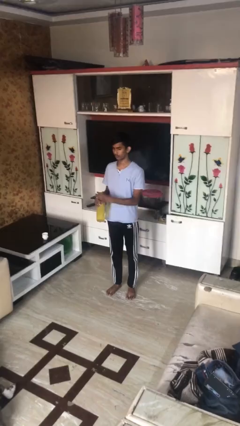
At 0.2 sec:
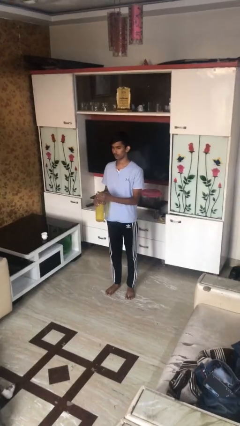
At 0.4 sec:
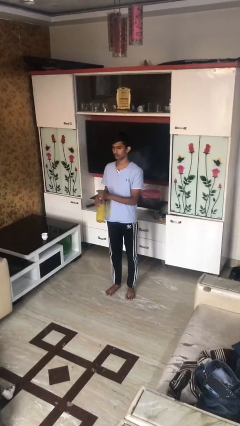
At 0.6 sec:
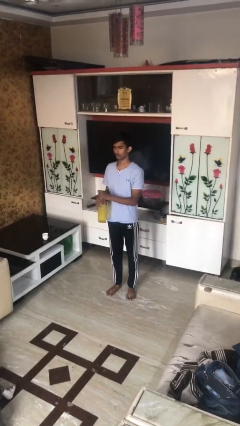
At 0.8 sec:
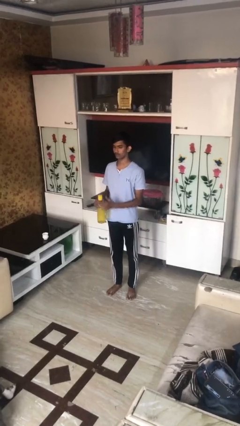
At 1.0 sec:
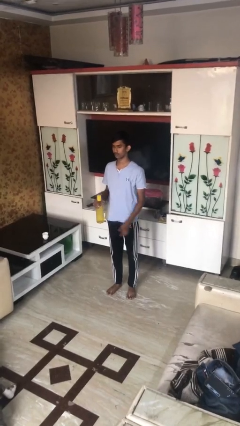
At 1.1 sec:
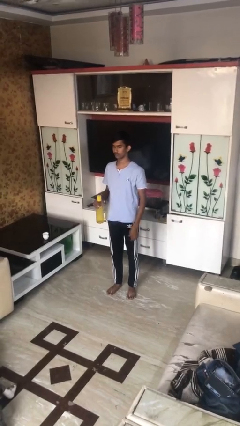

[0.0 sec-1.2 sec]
person screws lid to bottle

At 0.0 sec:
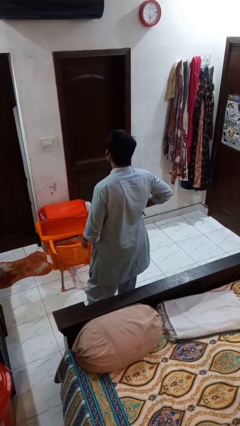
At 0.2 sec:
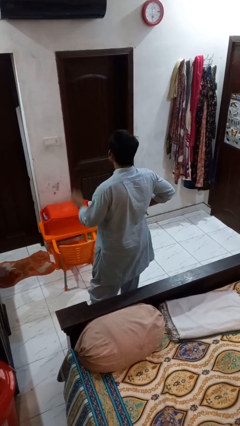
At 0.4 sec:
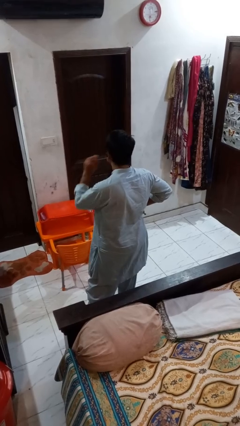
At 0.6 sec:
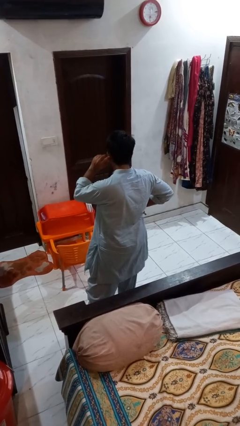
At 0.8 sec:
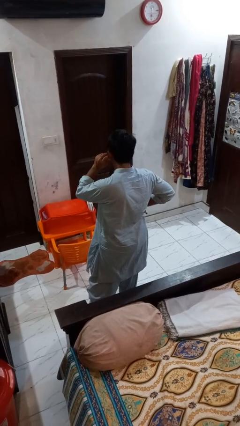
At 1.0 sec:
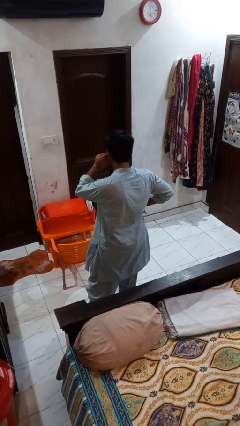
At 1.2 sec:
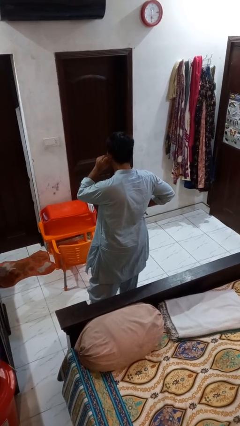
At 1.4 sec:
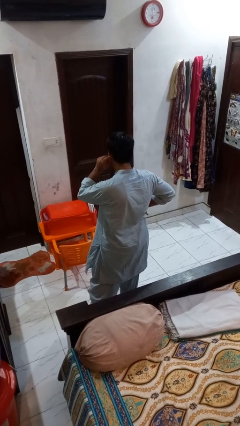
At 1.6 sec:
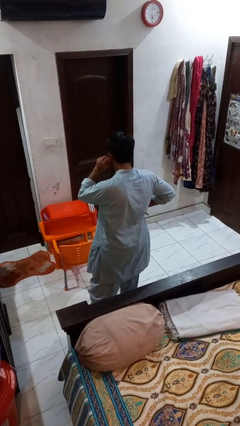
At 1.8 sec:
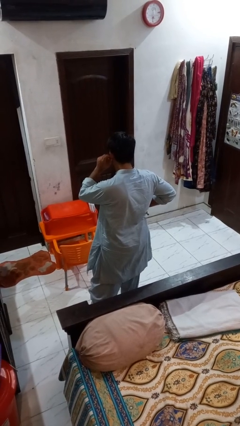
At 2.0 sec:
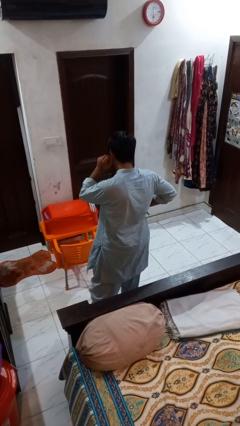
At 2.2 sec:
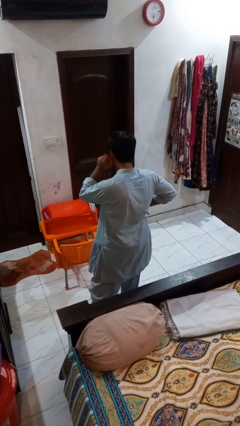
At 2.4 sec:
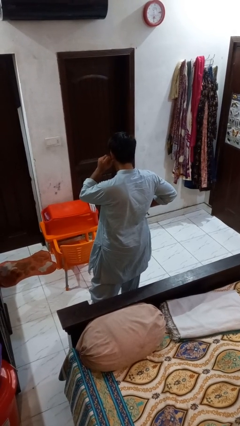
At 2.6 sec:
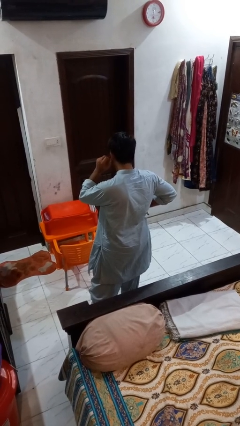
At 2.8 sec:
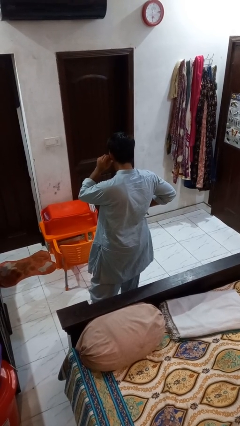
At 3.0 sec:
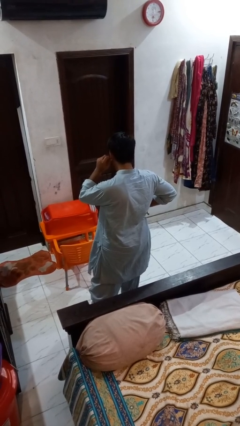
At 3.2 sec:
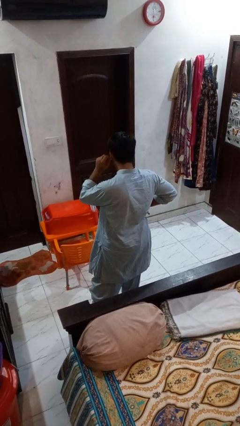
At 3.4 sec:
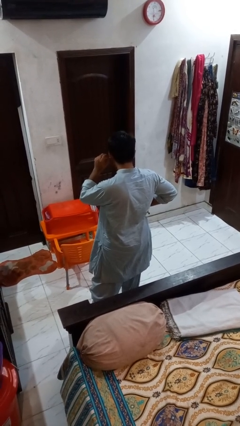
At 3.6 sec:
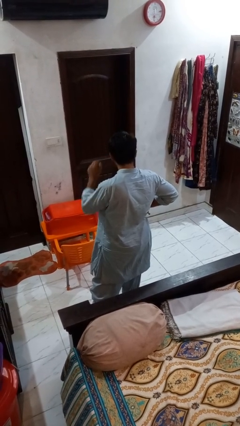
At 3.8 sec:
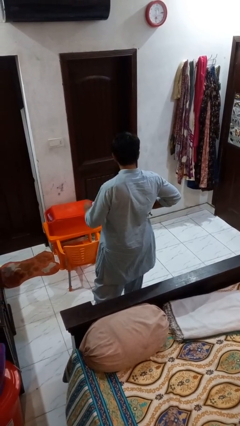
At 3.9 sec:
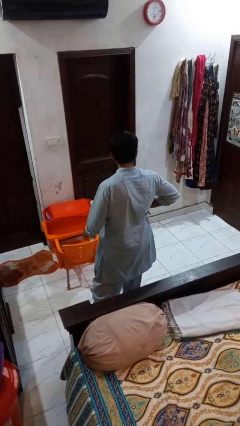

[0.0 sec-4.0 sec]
person touches earlobe

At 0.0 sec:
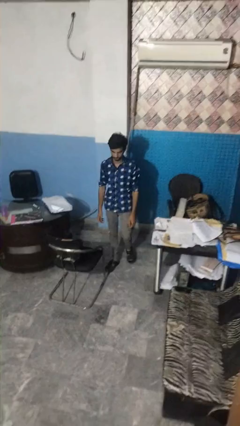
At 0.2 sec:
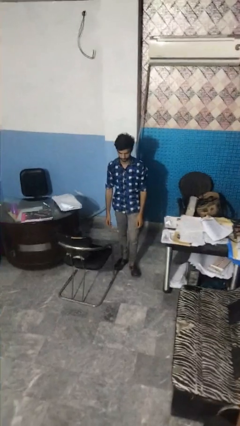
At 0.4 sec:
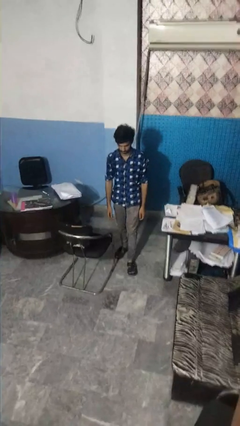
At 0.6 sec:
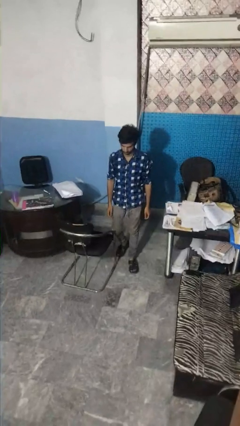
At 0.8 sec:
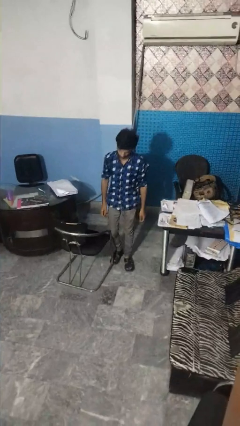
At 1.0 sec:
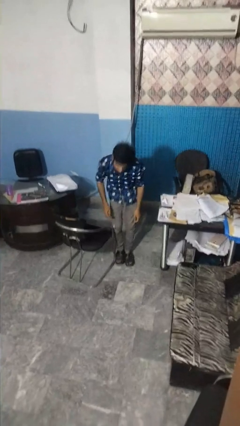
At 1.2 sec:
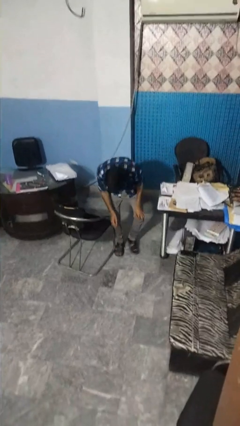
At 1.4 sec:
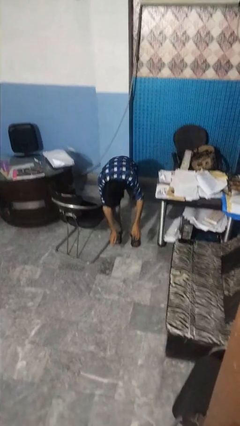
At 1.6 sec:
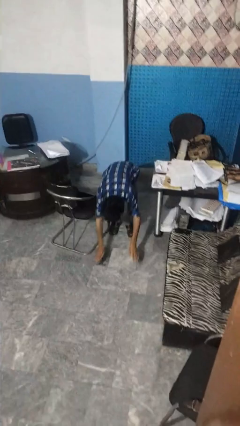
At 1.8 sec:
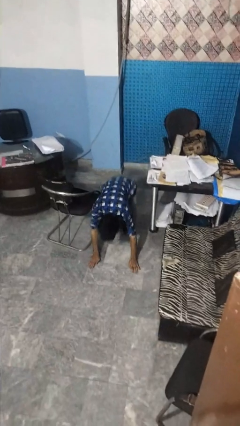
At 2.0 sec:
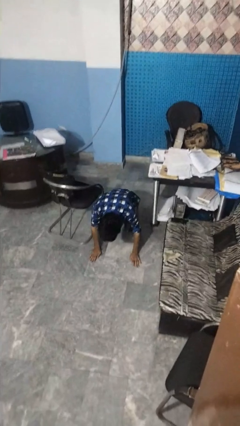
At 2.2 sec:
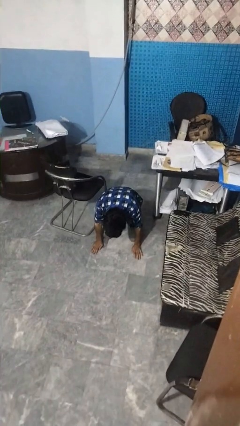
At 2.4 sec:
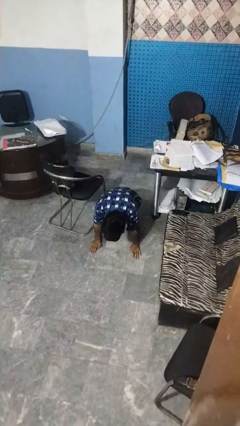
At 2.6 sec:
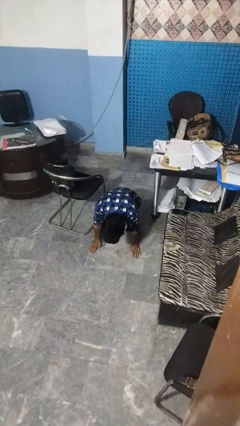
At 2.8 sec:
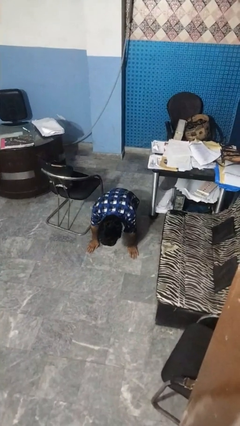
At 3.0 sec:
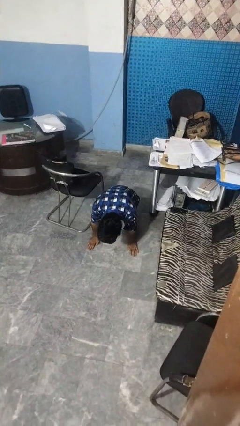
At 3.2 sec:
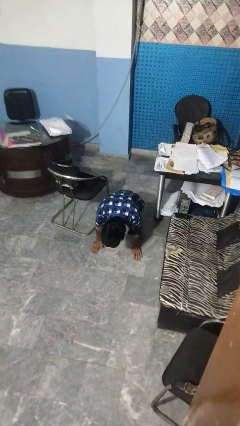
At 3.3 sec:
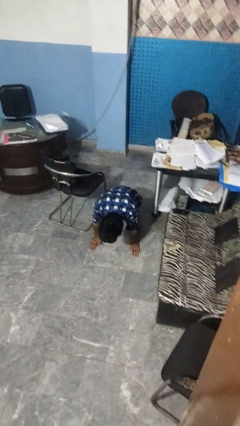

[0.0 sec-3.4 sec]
person trips on object on floor

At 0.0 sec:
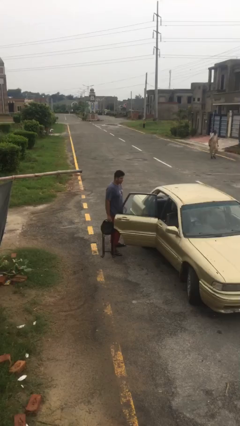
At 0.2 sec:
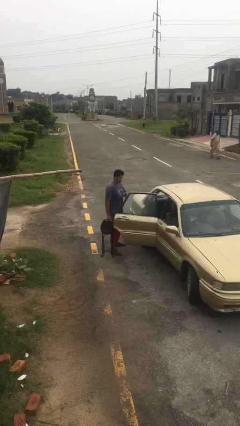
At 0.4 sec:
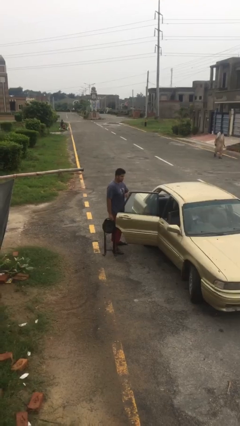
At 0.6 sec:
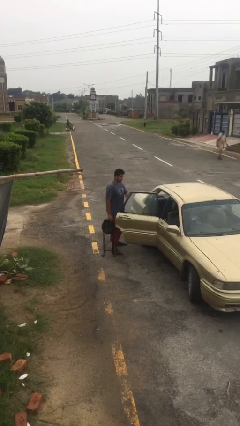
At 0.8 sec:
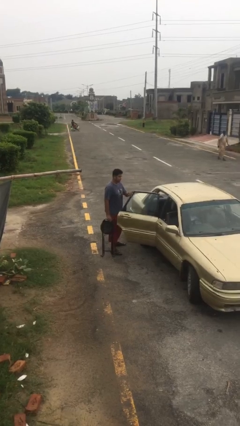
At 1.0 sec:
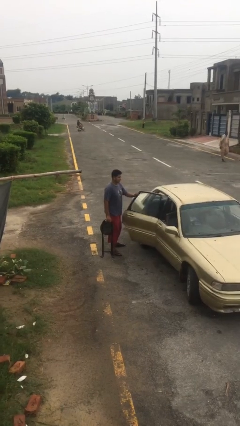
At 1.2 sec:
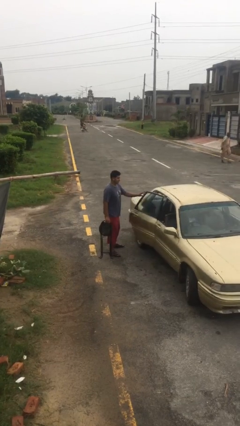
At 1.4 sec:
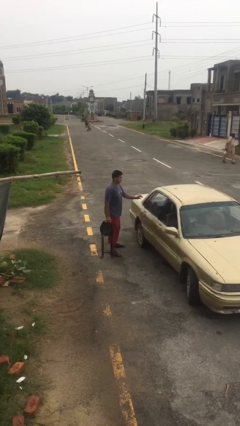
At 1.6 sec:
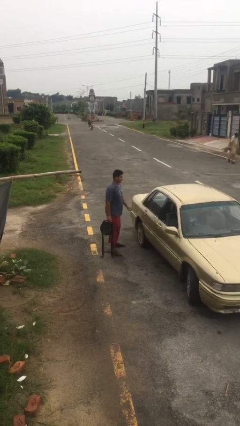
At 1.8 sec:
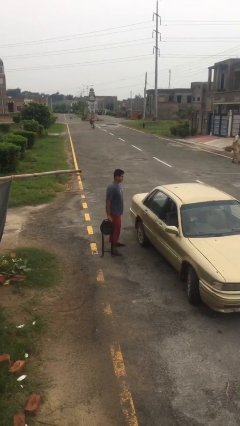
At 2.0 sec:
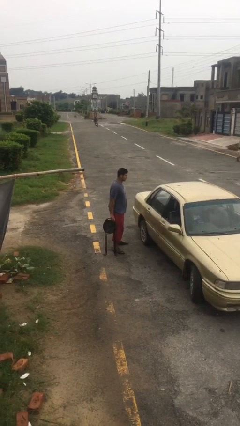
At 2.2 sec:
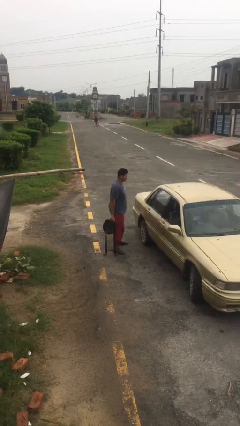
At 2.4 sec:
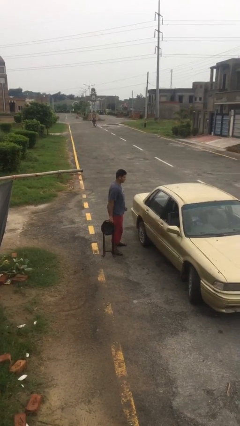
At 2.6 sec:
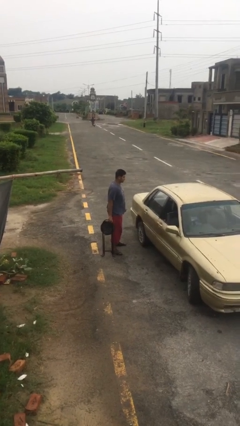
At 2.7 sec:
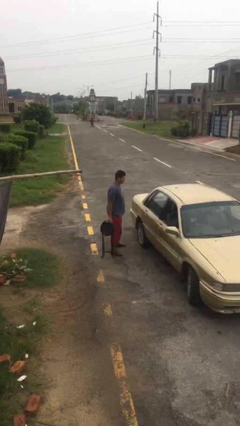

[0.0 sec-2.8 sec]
person closes car door

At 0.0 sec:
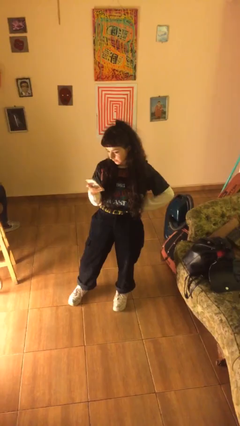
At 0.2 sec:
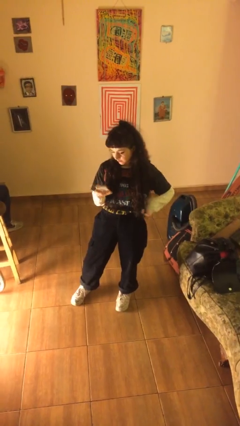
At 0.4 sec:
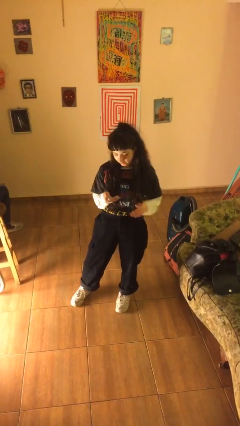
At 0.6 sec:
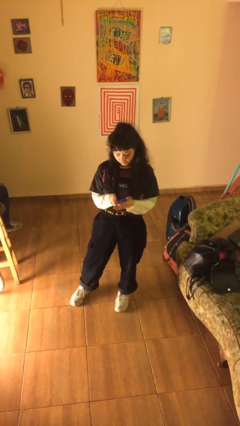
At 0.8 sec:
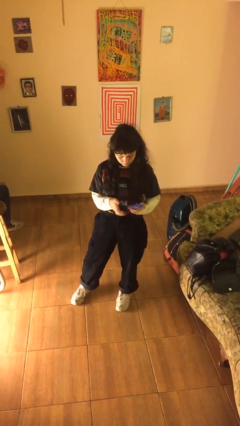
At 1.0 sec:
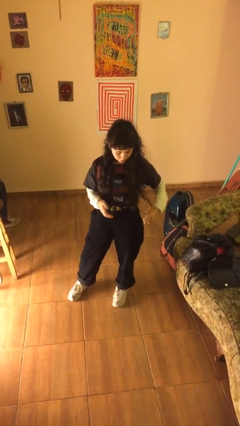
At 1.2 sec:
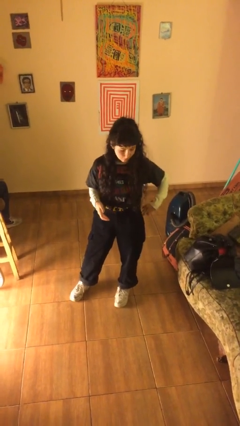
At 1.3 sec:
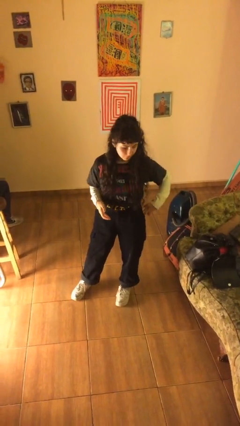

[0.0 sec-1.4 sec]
person puts phone into pocket

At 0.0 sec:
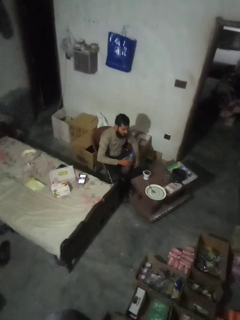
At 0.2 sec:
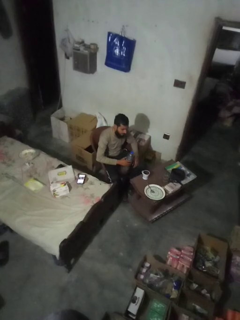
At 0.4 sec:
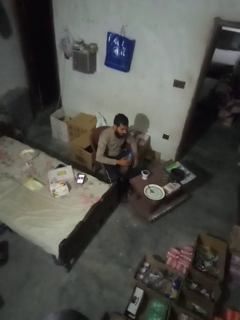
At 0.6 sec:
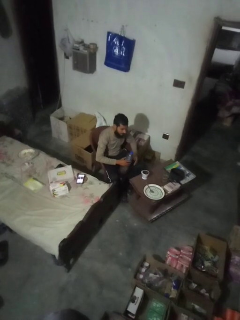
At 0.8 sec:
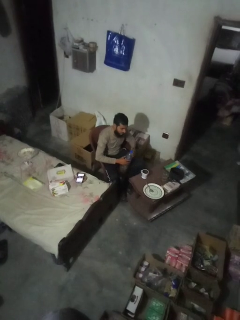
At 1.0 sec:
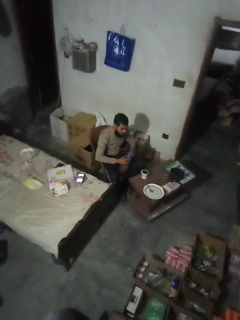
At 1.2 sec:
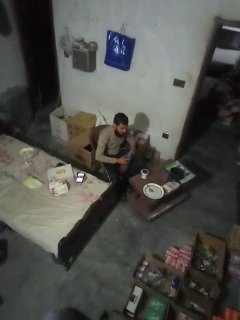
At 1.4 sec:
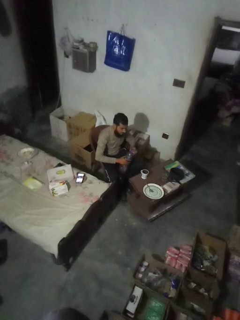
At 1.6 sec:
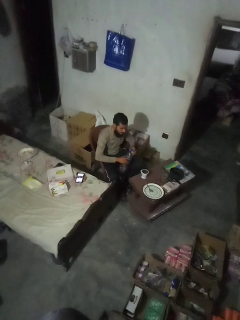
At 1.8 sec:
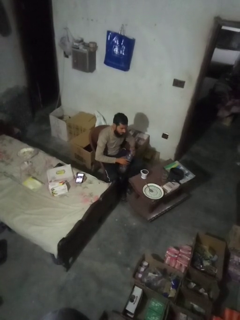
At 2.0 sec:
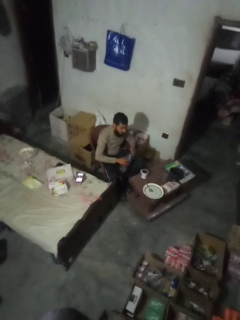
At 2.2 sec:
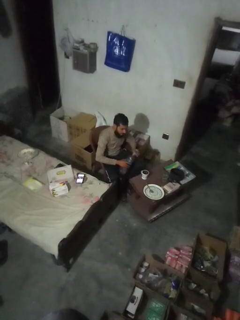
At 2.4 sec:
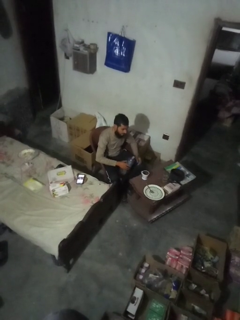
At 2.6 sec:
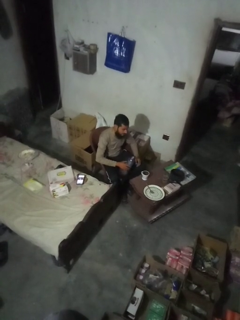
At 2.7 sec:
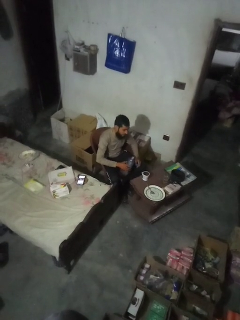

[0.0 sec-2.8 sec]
person unscrews lid from bottle

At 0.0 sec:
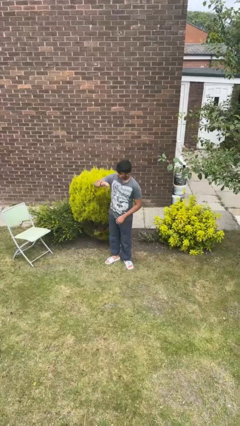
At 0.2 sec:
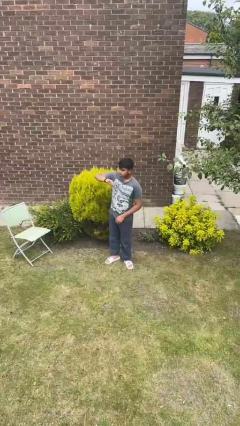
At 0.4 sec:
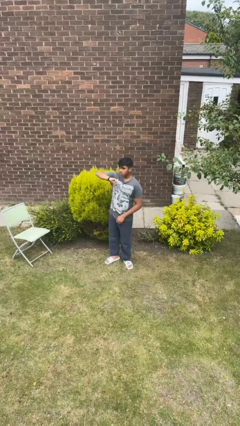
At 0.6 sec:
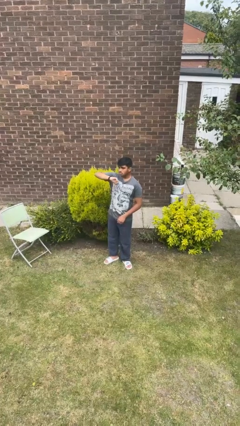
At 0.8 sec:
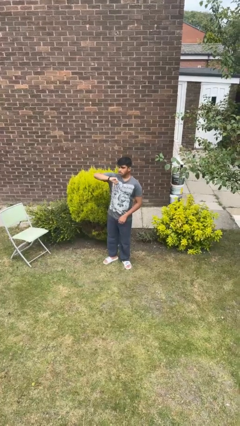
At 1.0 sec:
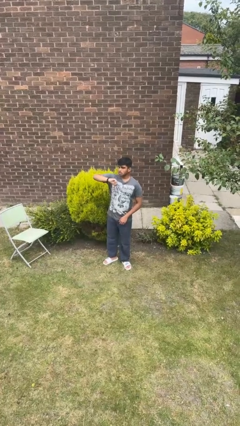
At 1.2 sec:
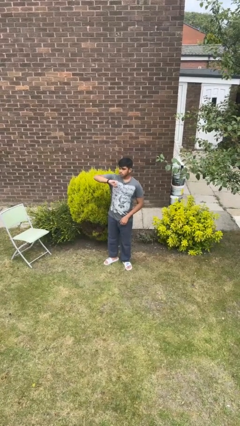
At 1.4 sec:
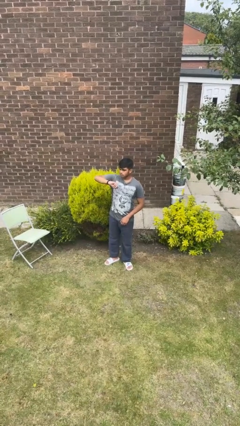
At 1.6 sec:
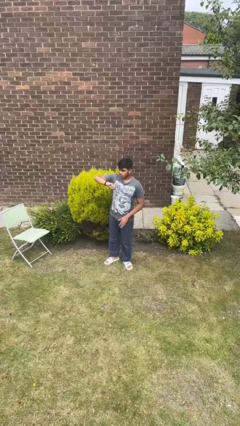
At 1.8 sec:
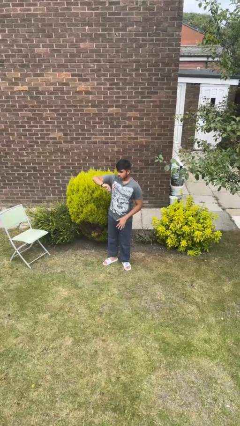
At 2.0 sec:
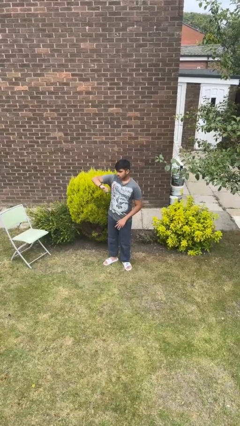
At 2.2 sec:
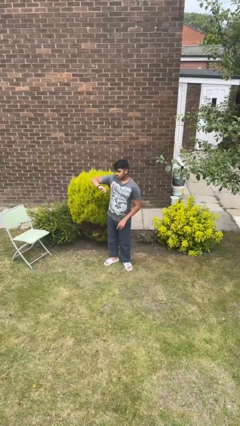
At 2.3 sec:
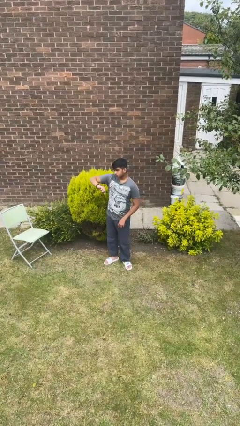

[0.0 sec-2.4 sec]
person looks at wristwatch
